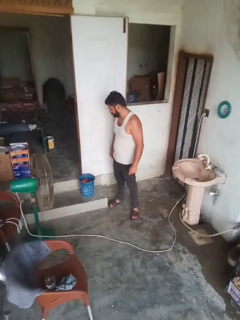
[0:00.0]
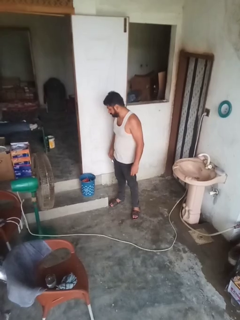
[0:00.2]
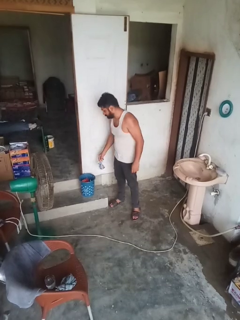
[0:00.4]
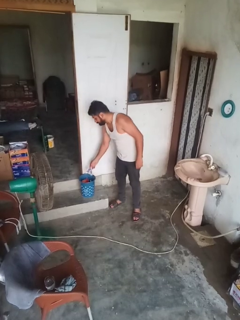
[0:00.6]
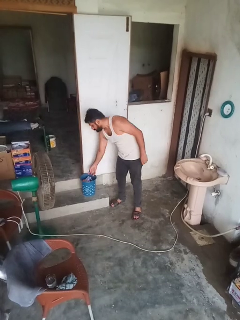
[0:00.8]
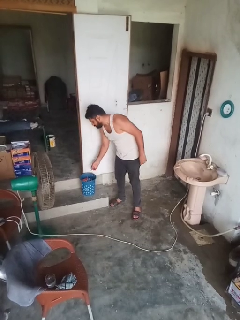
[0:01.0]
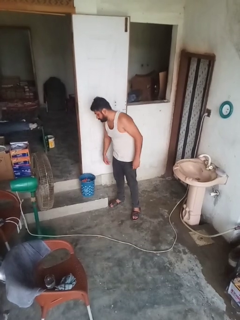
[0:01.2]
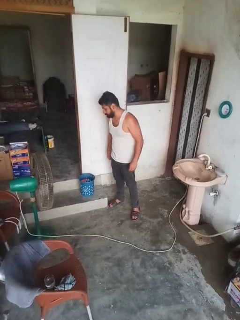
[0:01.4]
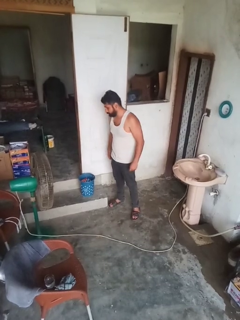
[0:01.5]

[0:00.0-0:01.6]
person discards trash

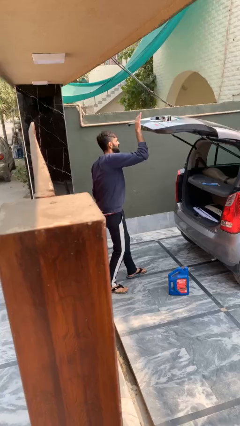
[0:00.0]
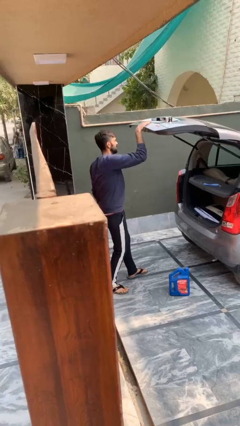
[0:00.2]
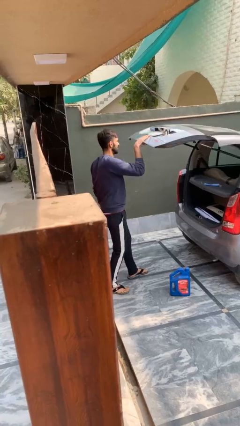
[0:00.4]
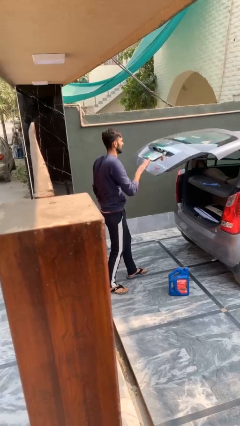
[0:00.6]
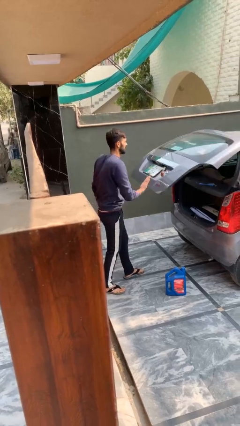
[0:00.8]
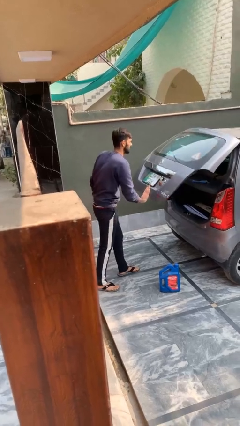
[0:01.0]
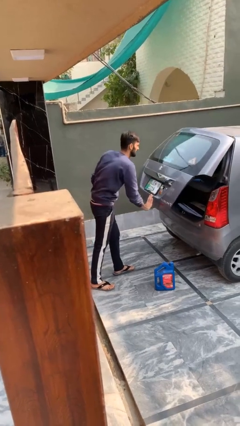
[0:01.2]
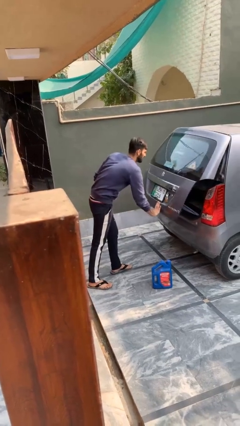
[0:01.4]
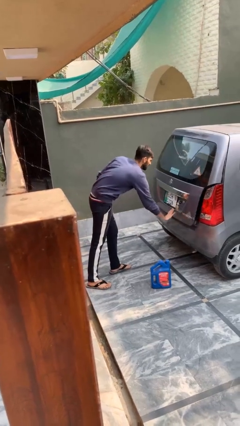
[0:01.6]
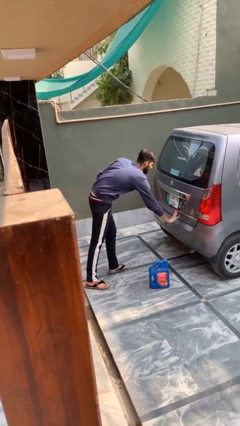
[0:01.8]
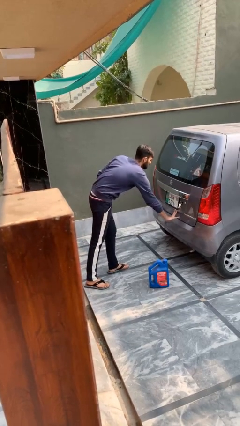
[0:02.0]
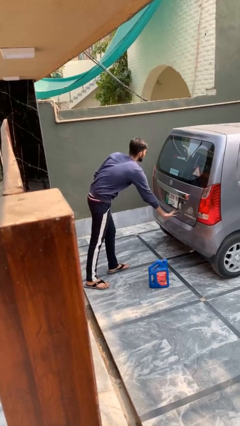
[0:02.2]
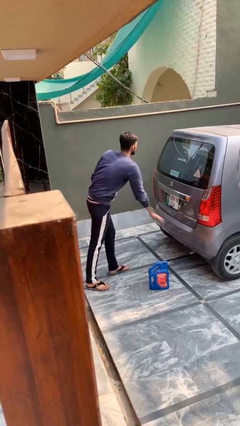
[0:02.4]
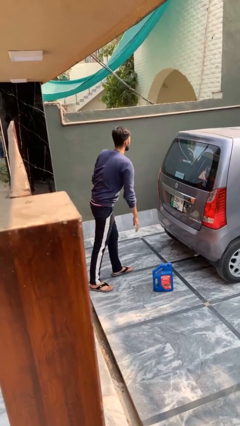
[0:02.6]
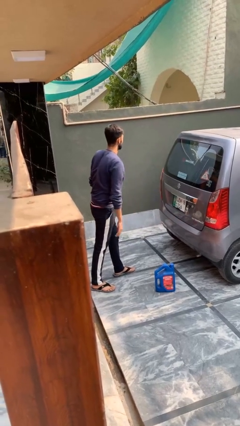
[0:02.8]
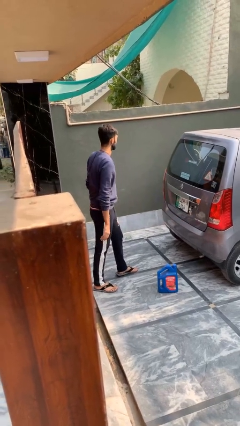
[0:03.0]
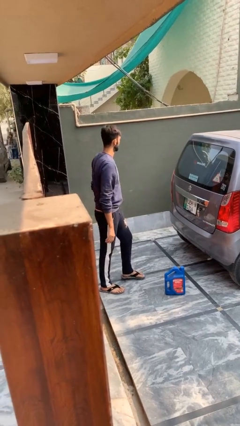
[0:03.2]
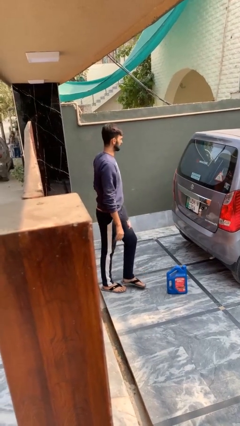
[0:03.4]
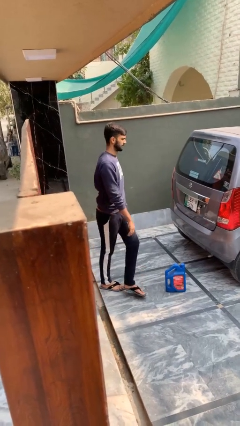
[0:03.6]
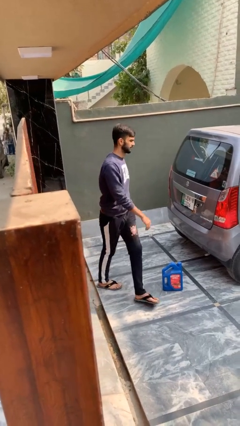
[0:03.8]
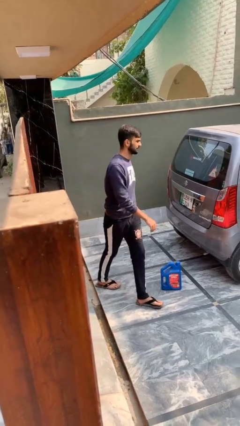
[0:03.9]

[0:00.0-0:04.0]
person closes car trunk

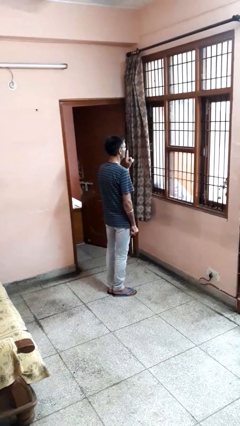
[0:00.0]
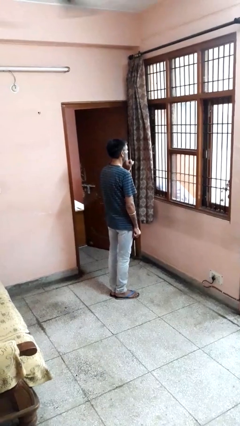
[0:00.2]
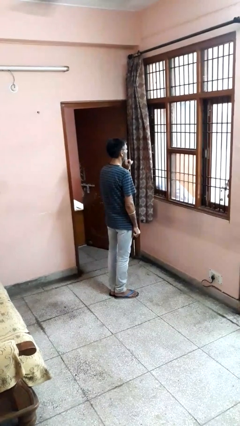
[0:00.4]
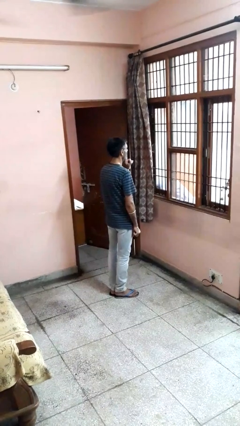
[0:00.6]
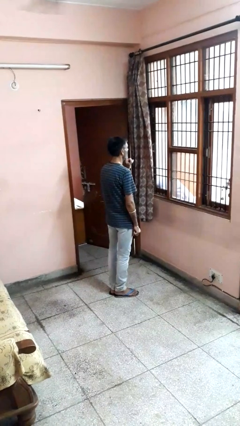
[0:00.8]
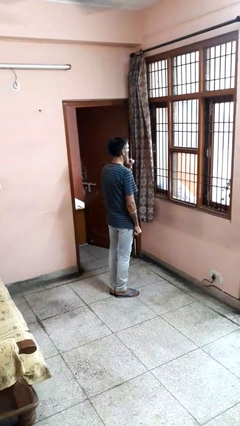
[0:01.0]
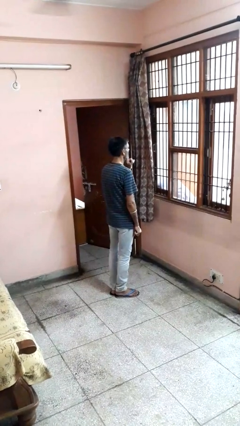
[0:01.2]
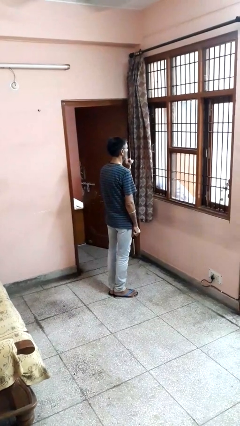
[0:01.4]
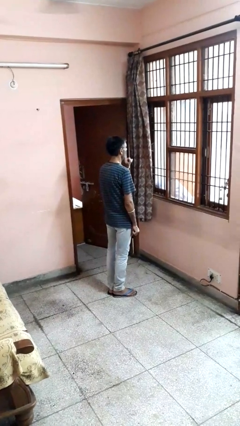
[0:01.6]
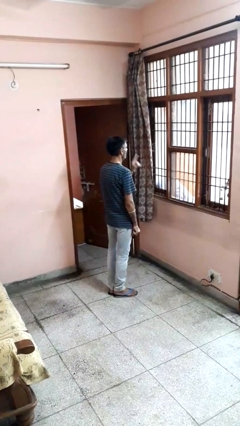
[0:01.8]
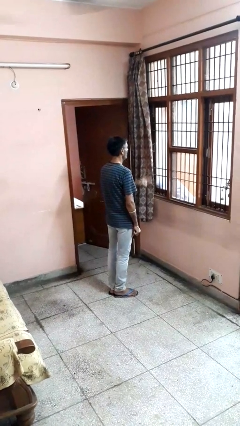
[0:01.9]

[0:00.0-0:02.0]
person gestures be quiet

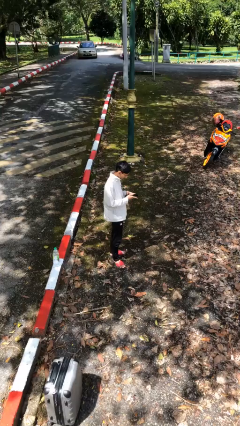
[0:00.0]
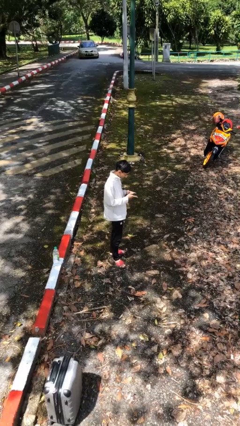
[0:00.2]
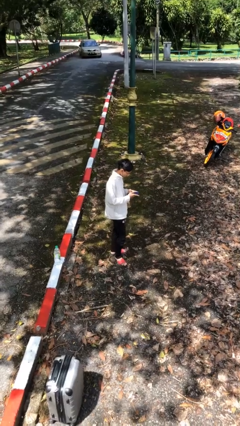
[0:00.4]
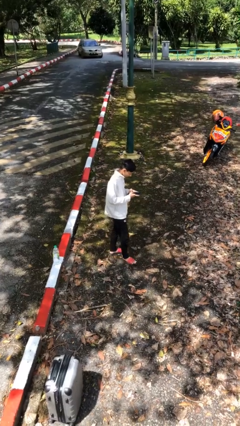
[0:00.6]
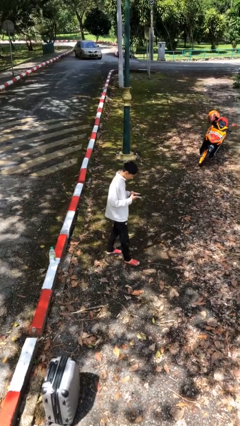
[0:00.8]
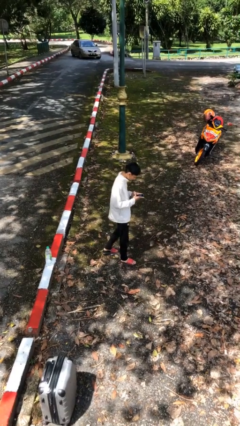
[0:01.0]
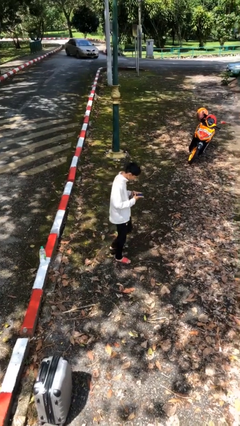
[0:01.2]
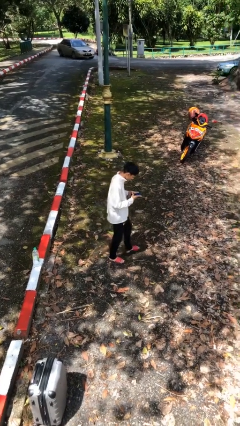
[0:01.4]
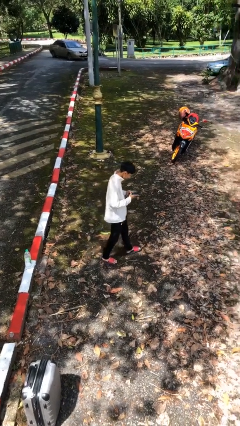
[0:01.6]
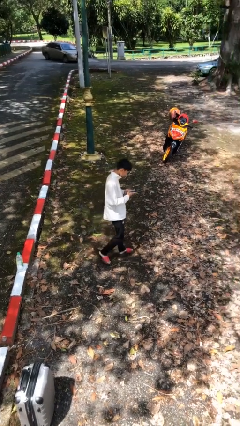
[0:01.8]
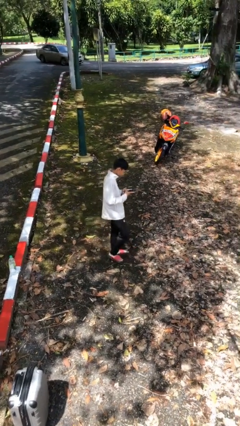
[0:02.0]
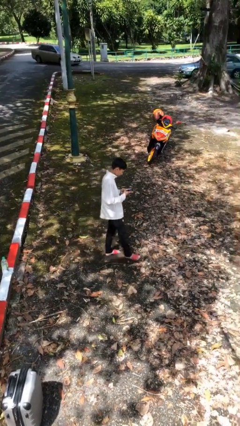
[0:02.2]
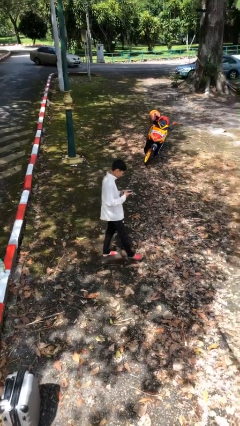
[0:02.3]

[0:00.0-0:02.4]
person texts on phone

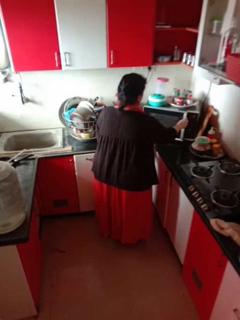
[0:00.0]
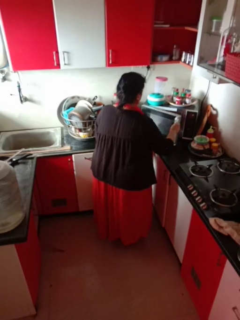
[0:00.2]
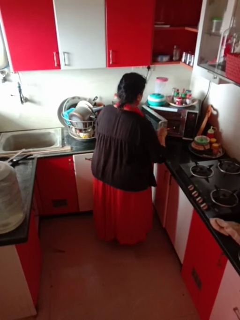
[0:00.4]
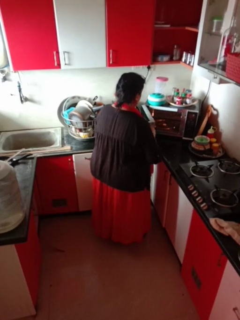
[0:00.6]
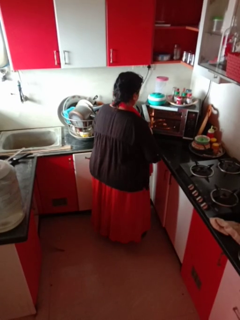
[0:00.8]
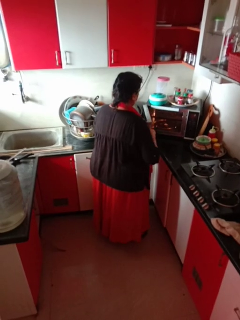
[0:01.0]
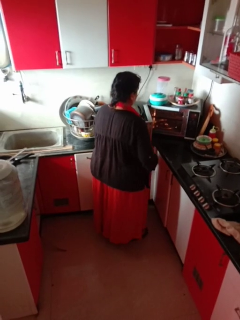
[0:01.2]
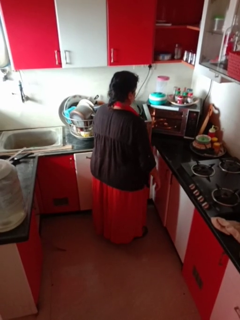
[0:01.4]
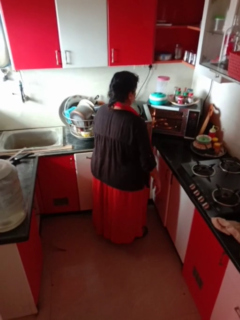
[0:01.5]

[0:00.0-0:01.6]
person opens microwave

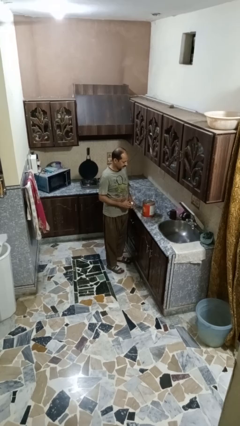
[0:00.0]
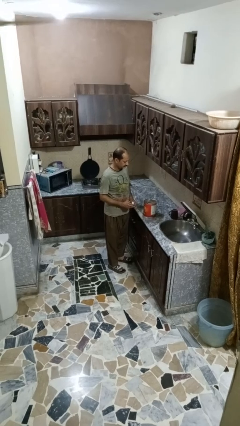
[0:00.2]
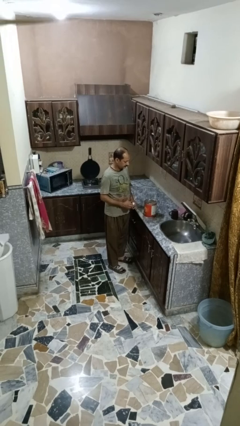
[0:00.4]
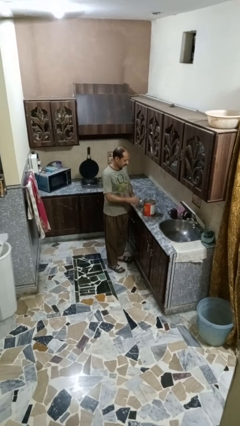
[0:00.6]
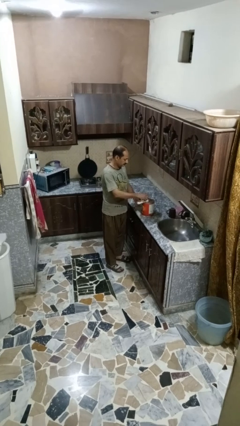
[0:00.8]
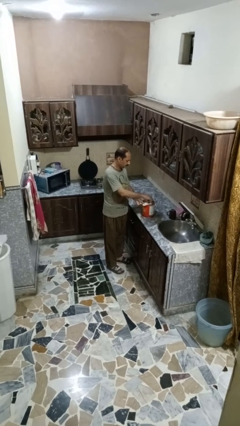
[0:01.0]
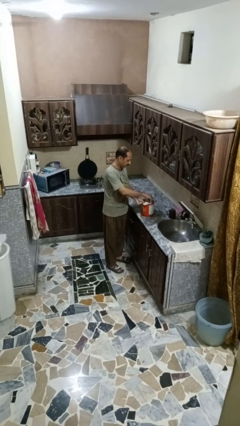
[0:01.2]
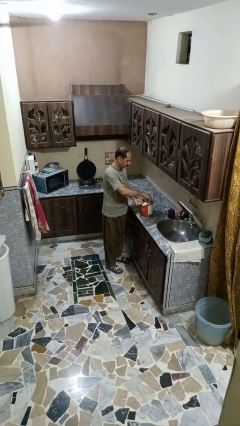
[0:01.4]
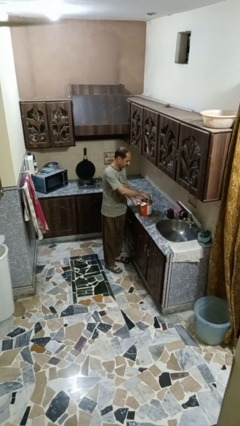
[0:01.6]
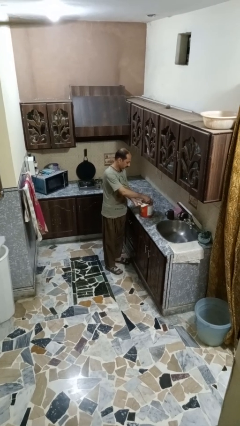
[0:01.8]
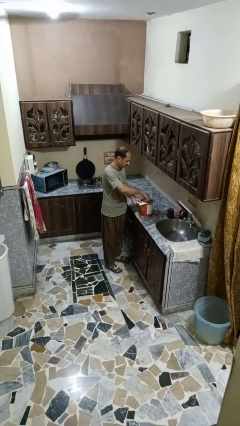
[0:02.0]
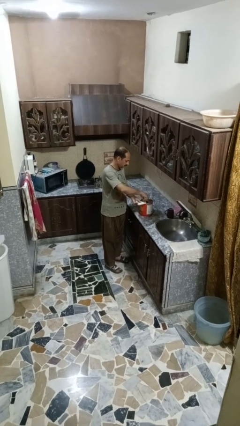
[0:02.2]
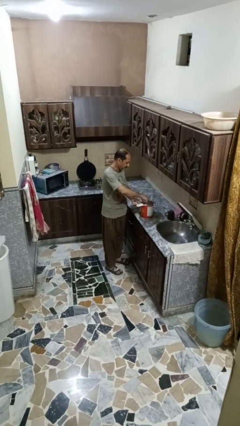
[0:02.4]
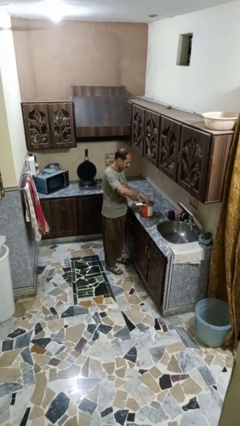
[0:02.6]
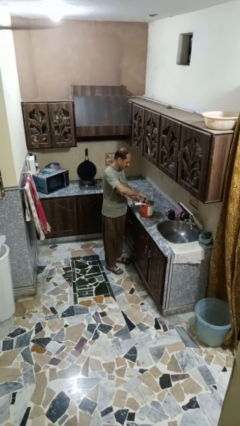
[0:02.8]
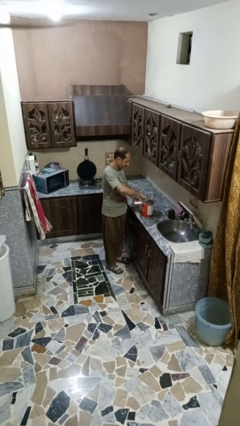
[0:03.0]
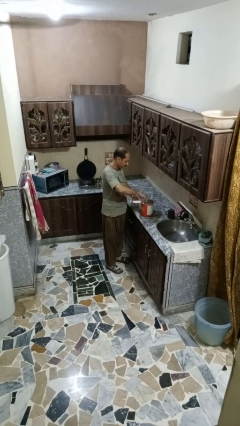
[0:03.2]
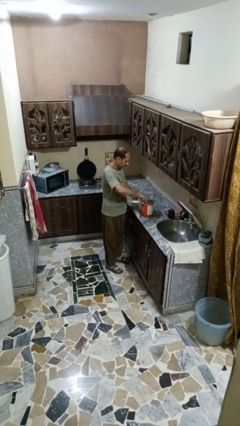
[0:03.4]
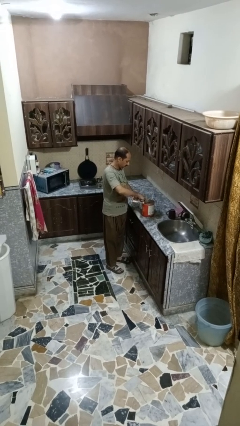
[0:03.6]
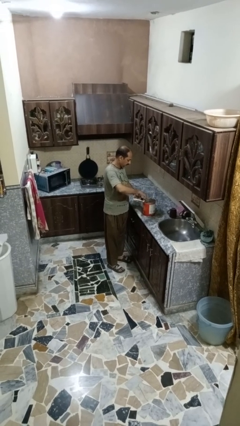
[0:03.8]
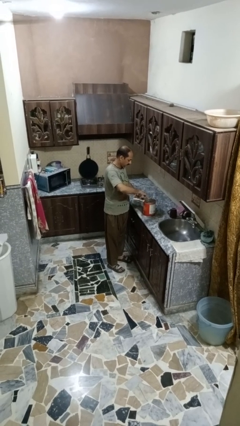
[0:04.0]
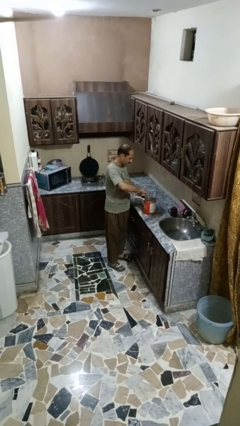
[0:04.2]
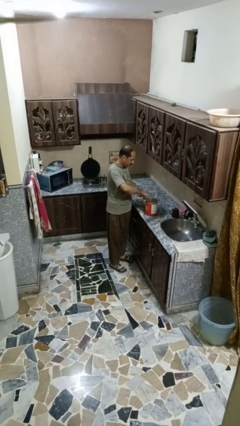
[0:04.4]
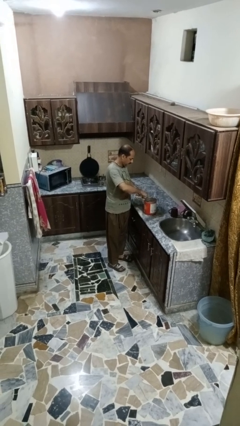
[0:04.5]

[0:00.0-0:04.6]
person opens can with can opener

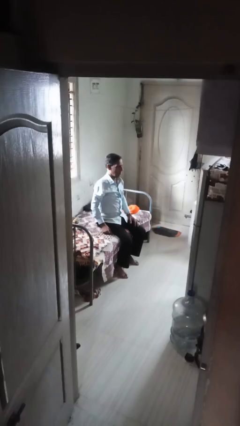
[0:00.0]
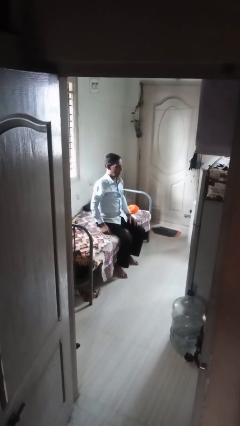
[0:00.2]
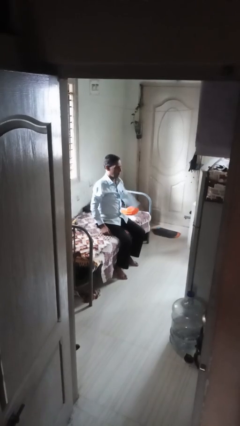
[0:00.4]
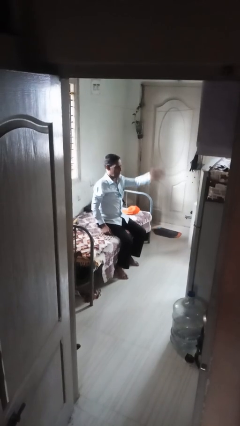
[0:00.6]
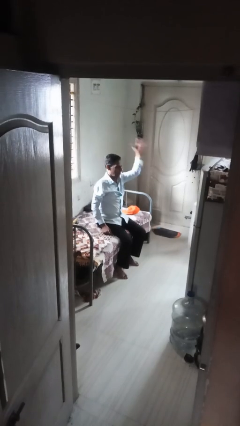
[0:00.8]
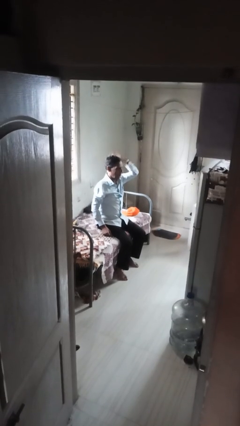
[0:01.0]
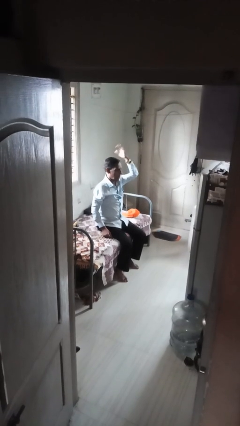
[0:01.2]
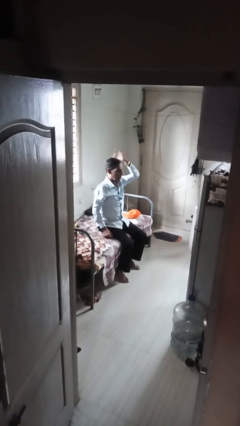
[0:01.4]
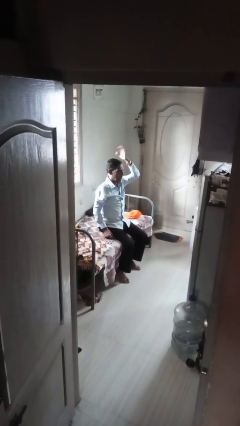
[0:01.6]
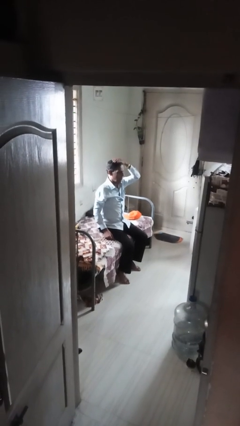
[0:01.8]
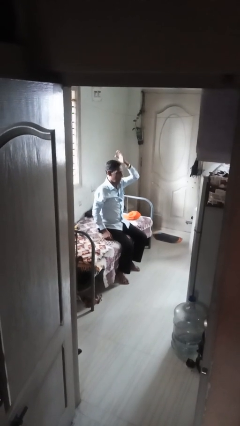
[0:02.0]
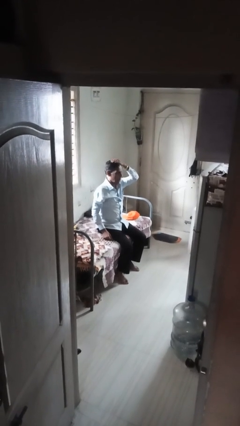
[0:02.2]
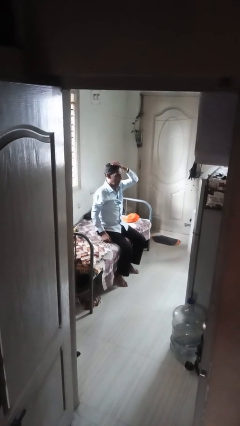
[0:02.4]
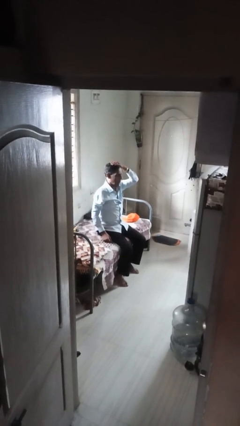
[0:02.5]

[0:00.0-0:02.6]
person pats head
